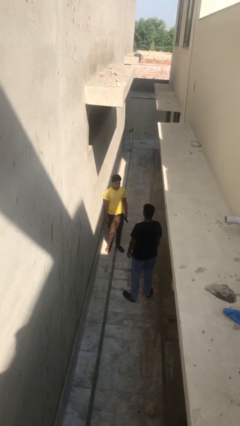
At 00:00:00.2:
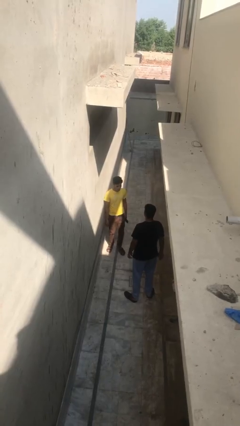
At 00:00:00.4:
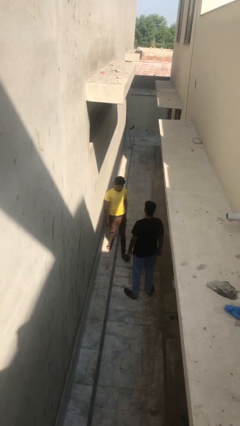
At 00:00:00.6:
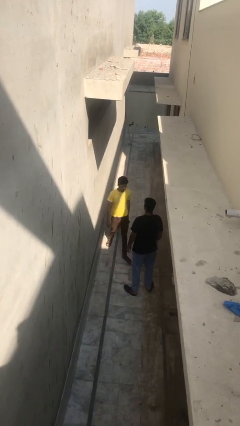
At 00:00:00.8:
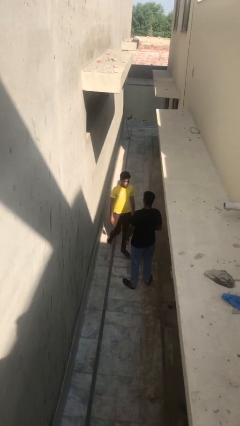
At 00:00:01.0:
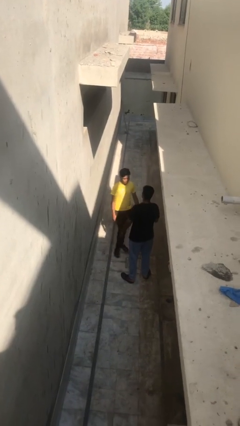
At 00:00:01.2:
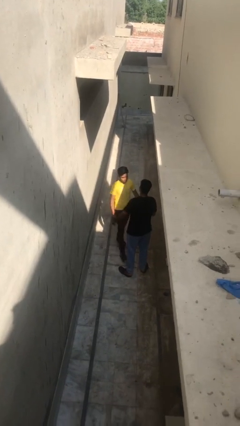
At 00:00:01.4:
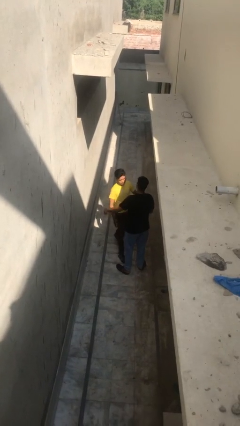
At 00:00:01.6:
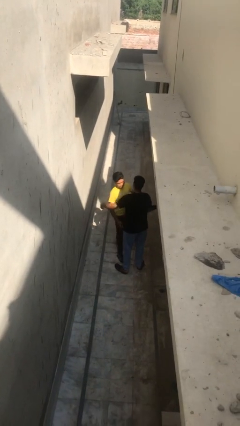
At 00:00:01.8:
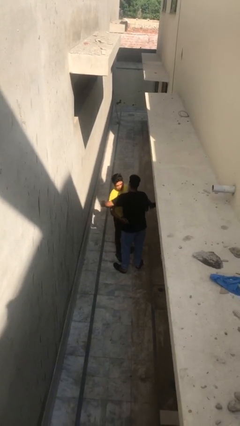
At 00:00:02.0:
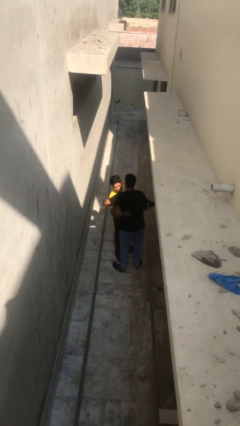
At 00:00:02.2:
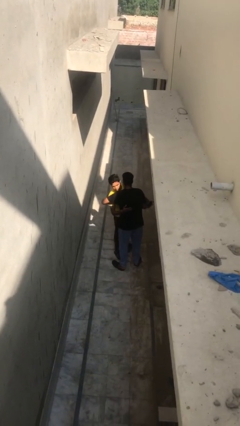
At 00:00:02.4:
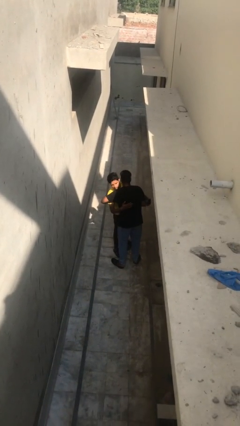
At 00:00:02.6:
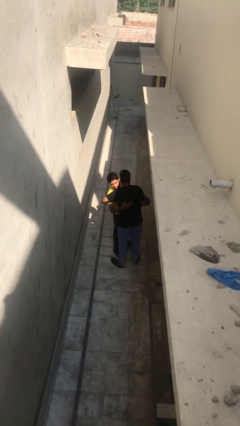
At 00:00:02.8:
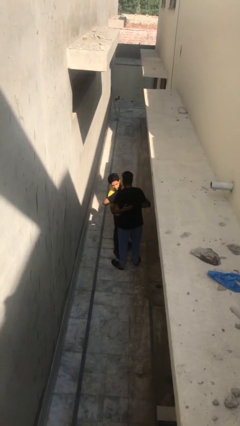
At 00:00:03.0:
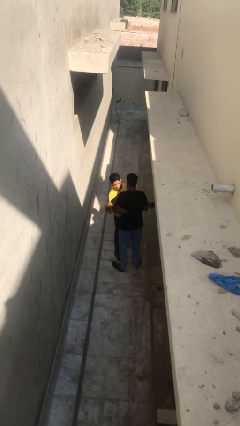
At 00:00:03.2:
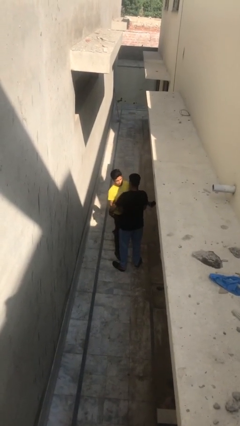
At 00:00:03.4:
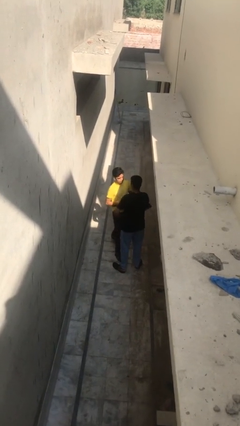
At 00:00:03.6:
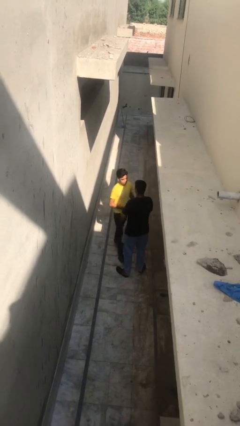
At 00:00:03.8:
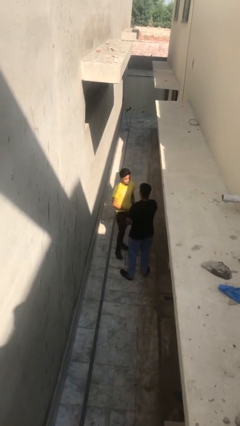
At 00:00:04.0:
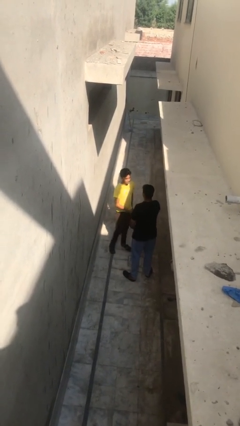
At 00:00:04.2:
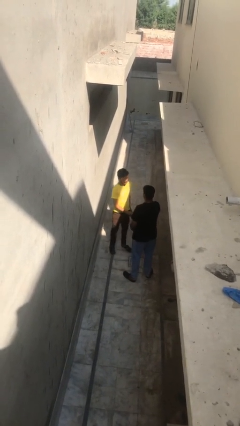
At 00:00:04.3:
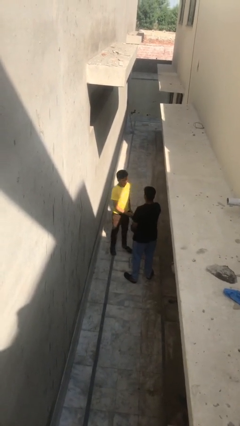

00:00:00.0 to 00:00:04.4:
person embraces person

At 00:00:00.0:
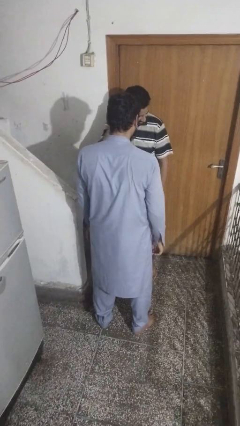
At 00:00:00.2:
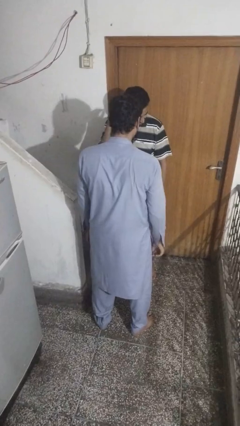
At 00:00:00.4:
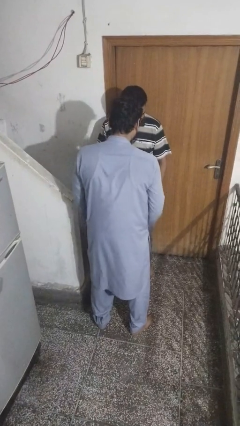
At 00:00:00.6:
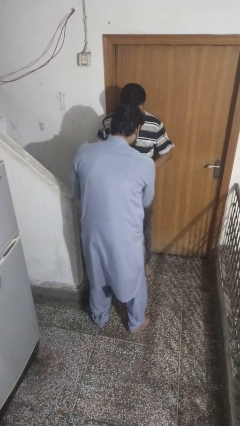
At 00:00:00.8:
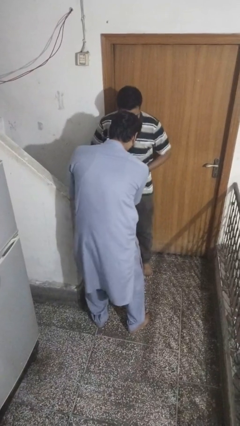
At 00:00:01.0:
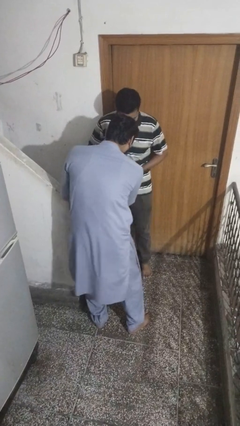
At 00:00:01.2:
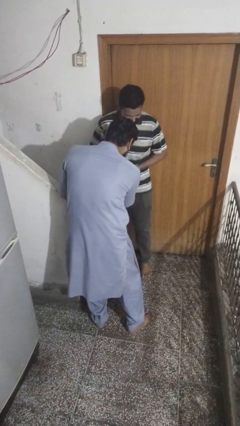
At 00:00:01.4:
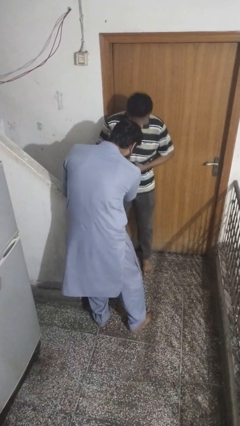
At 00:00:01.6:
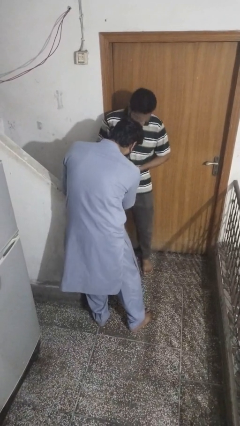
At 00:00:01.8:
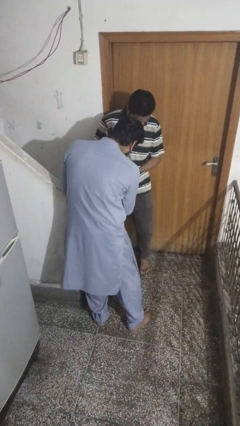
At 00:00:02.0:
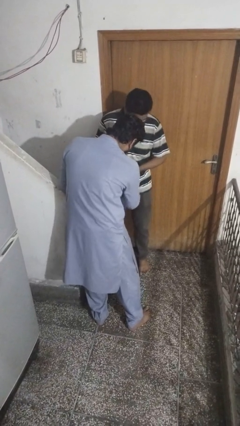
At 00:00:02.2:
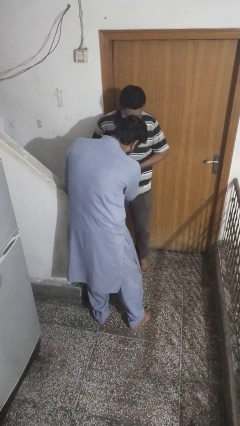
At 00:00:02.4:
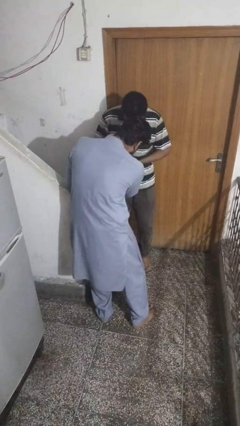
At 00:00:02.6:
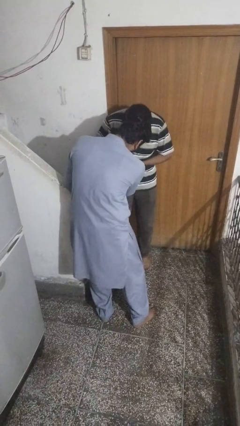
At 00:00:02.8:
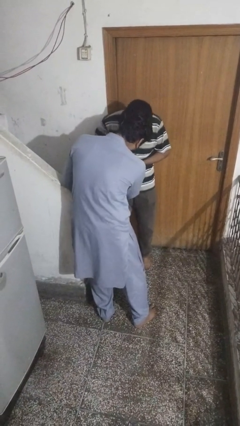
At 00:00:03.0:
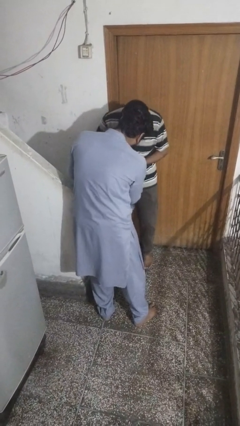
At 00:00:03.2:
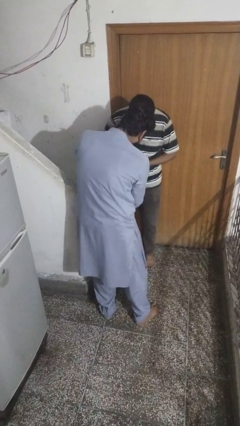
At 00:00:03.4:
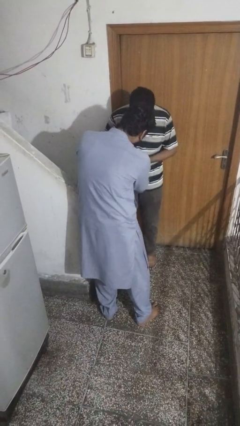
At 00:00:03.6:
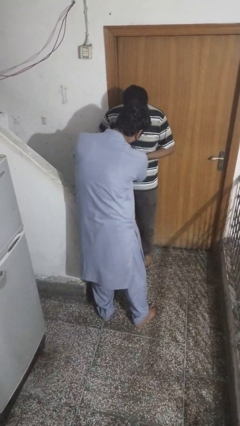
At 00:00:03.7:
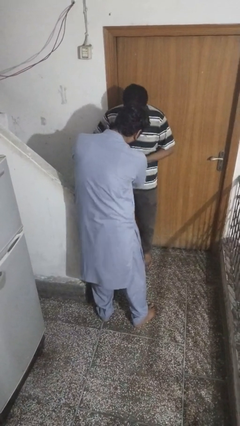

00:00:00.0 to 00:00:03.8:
person tickles person

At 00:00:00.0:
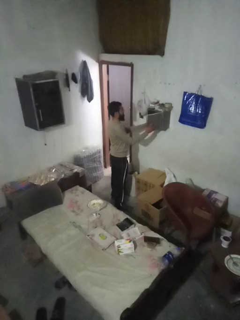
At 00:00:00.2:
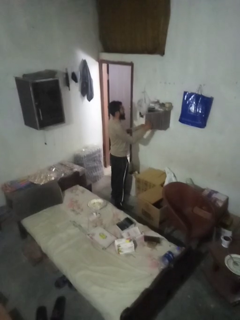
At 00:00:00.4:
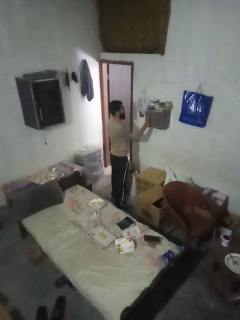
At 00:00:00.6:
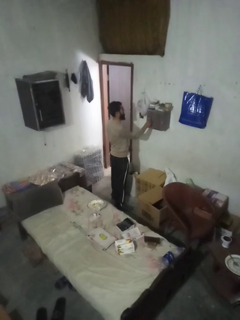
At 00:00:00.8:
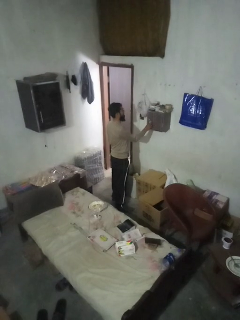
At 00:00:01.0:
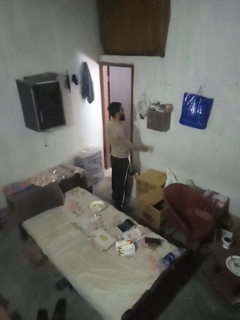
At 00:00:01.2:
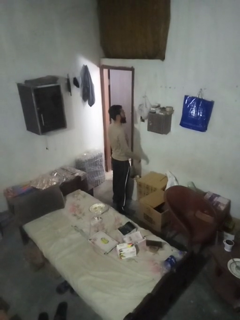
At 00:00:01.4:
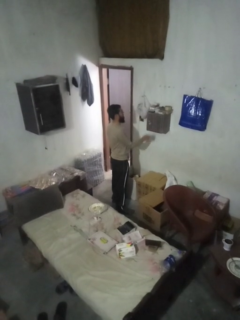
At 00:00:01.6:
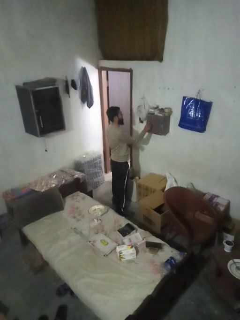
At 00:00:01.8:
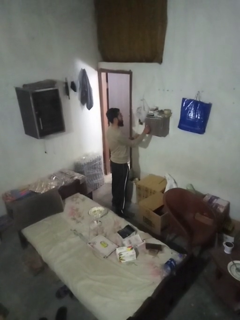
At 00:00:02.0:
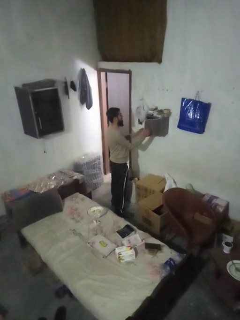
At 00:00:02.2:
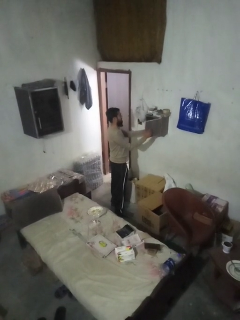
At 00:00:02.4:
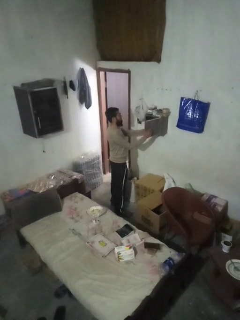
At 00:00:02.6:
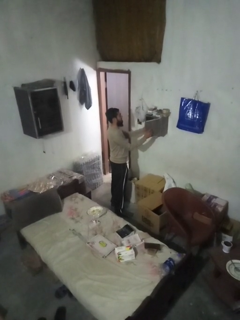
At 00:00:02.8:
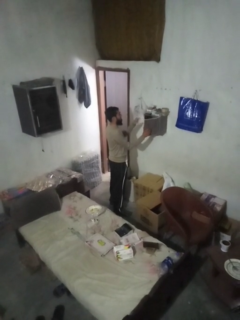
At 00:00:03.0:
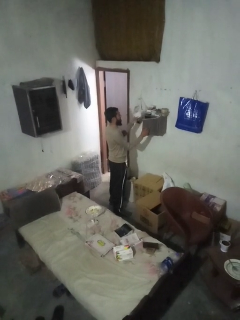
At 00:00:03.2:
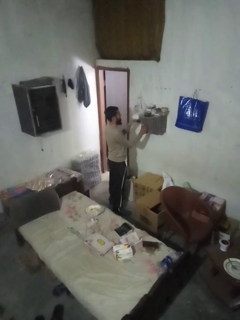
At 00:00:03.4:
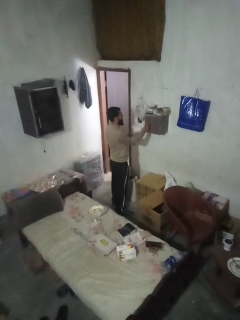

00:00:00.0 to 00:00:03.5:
person takes letters from mailbox

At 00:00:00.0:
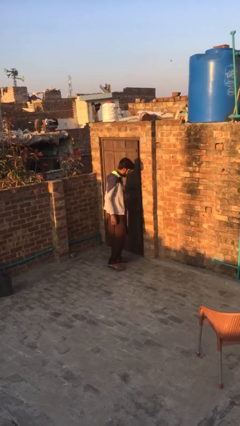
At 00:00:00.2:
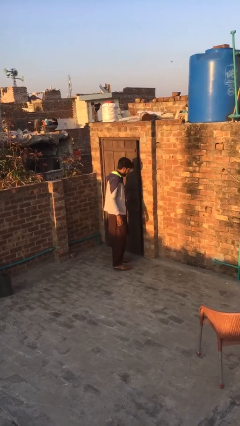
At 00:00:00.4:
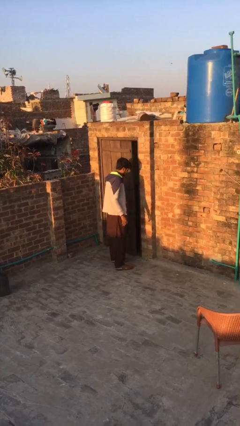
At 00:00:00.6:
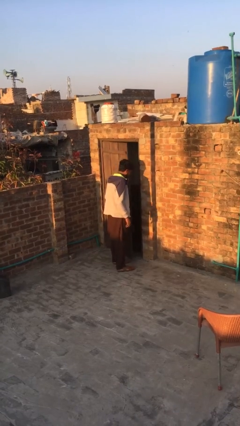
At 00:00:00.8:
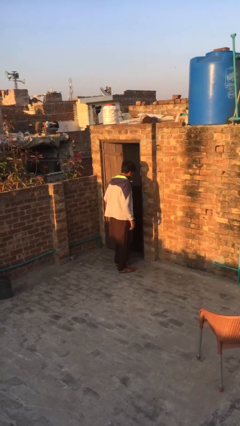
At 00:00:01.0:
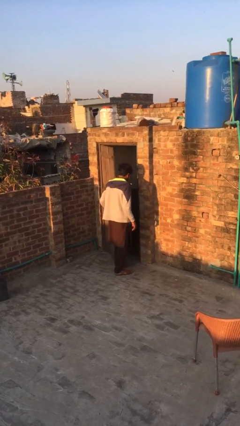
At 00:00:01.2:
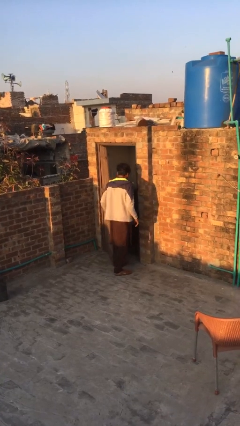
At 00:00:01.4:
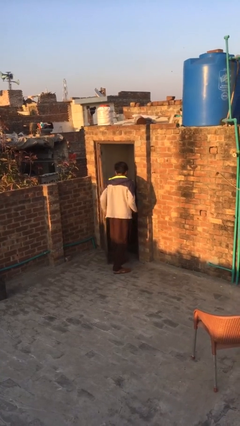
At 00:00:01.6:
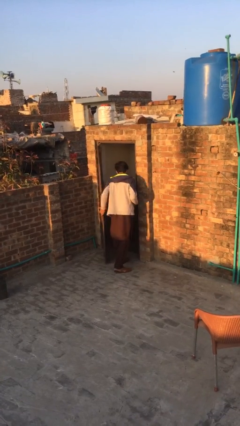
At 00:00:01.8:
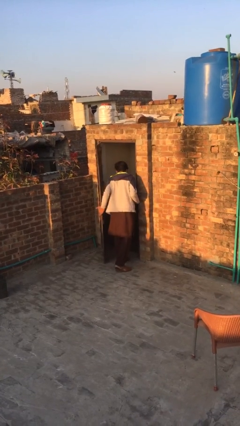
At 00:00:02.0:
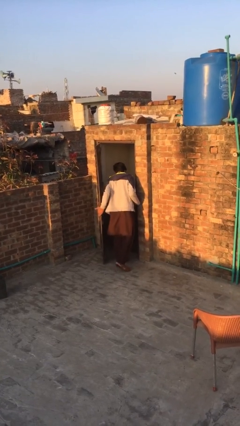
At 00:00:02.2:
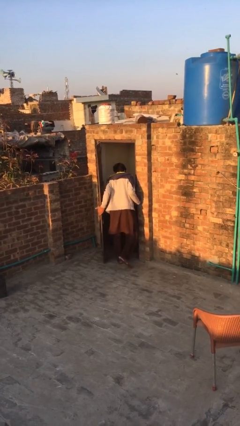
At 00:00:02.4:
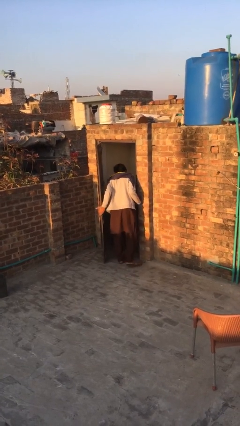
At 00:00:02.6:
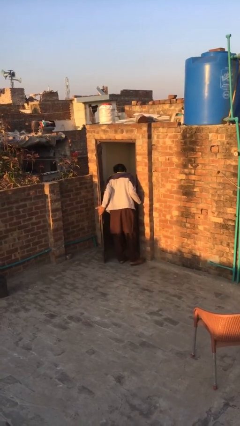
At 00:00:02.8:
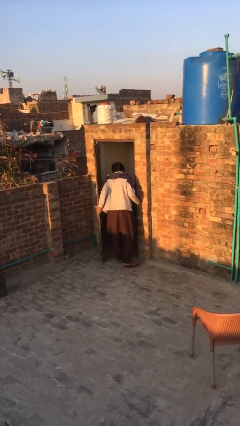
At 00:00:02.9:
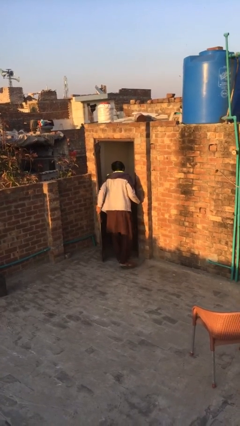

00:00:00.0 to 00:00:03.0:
person opens facility door

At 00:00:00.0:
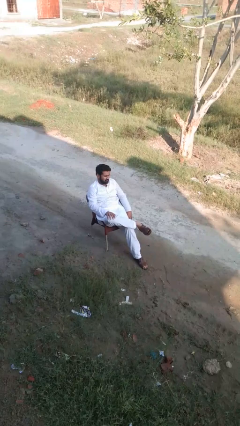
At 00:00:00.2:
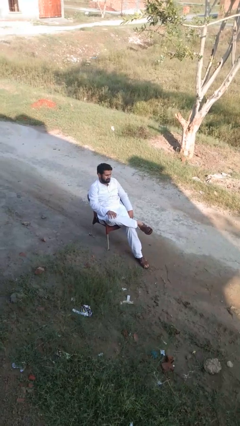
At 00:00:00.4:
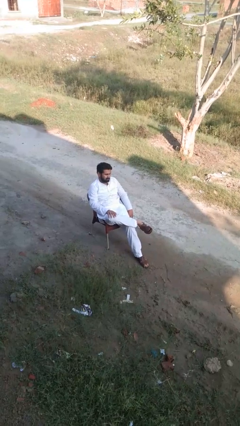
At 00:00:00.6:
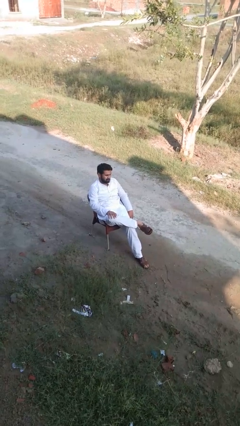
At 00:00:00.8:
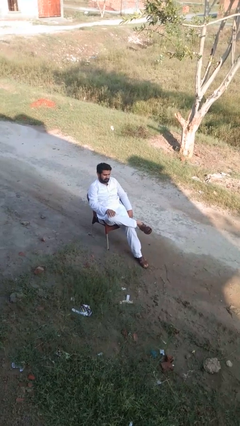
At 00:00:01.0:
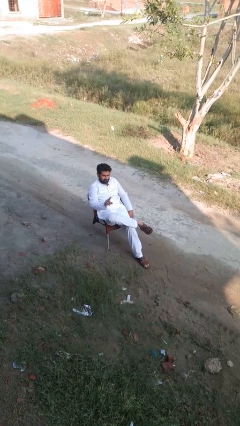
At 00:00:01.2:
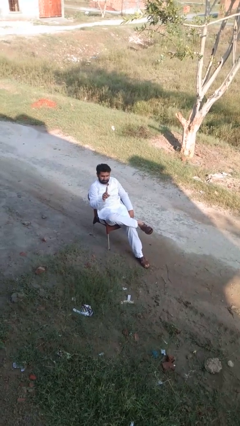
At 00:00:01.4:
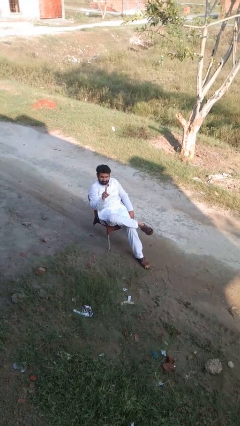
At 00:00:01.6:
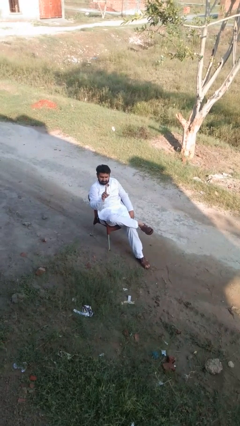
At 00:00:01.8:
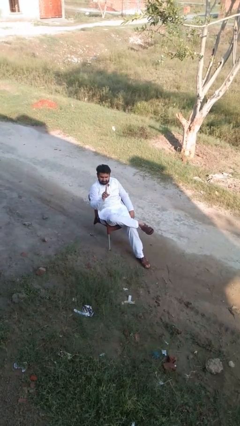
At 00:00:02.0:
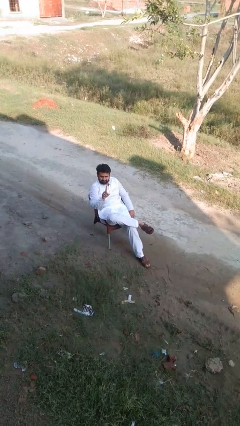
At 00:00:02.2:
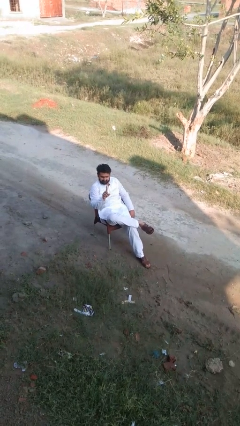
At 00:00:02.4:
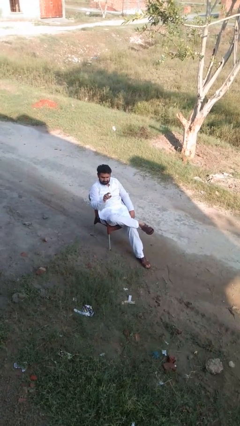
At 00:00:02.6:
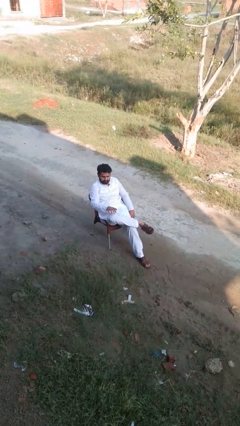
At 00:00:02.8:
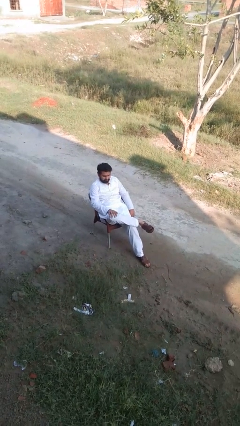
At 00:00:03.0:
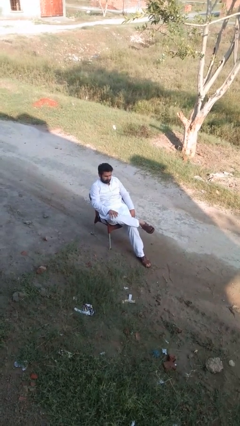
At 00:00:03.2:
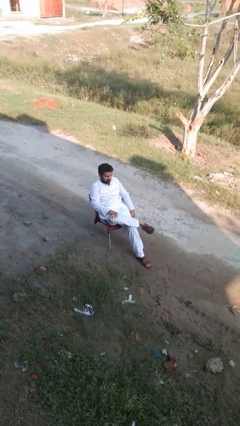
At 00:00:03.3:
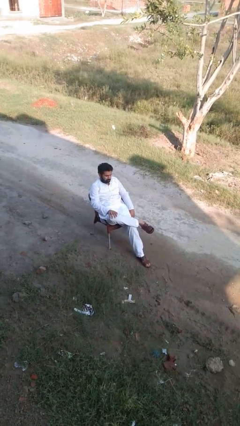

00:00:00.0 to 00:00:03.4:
person gestures number one
